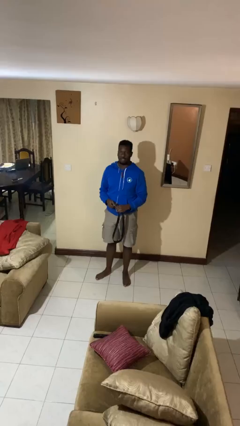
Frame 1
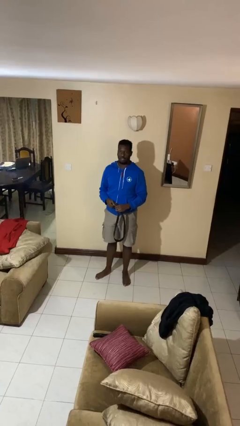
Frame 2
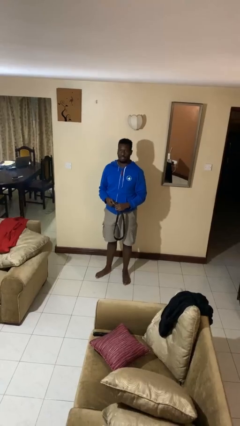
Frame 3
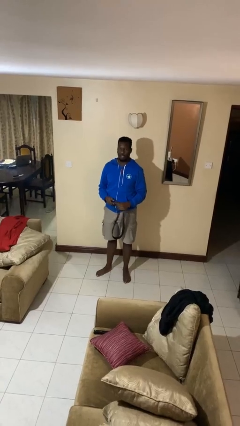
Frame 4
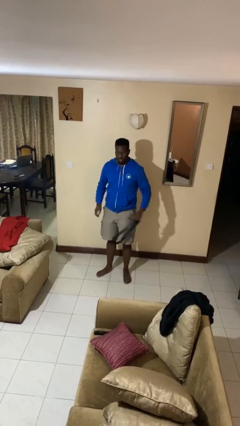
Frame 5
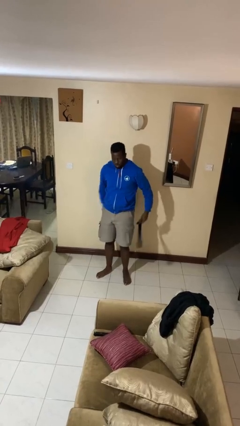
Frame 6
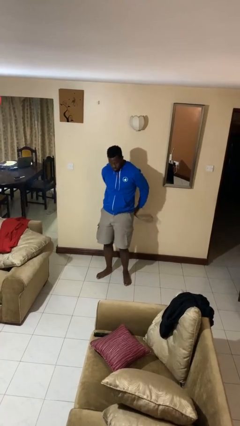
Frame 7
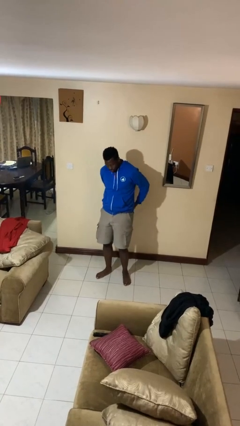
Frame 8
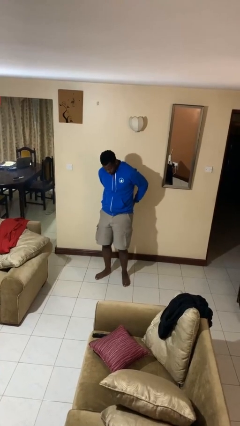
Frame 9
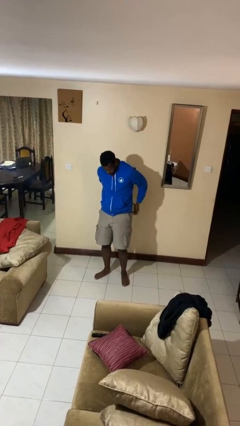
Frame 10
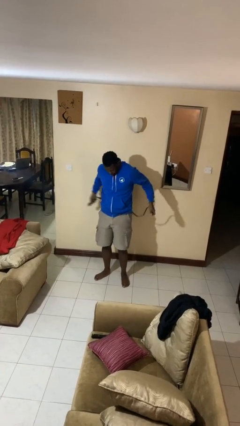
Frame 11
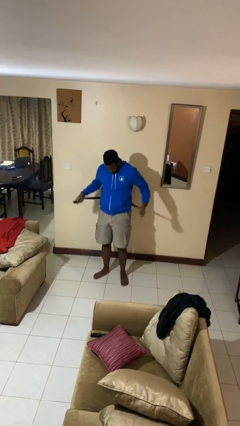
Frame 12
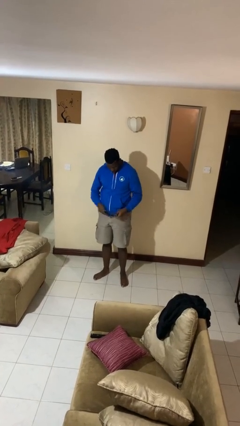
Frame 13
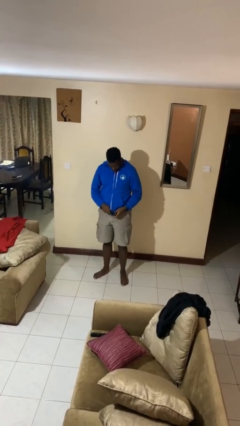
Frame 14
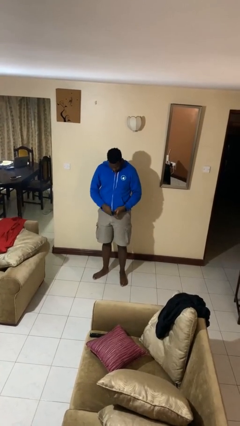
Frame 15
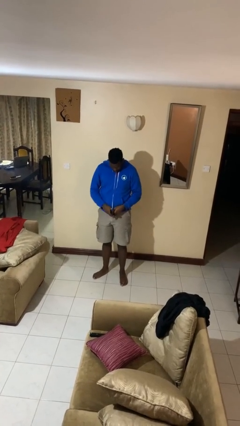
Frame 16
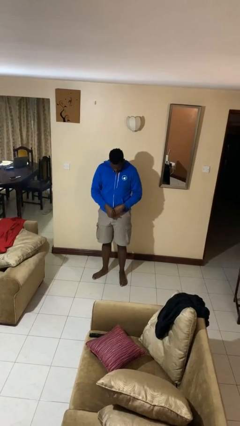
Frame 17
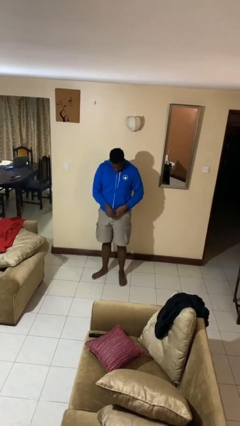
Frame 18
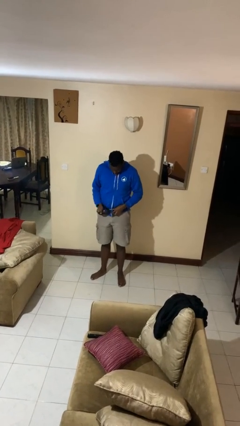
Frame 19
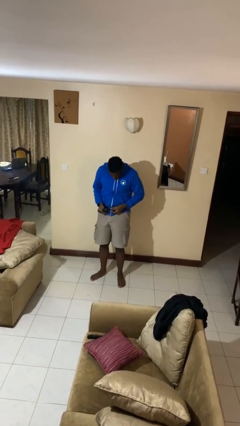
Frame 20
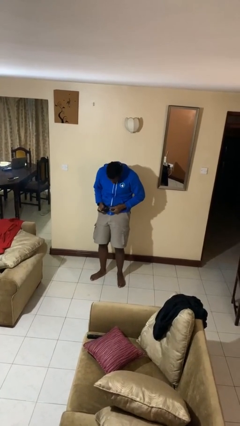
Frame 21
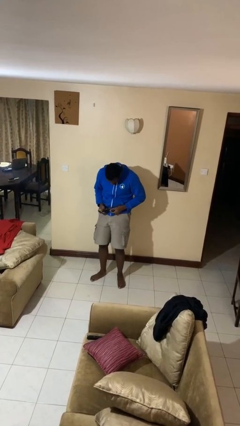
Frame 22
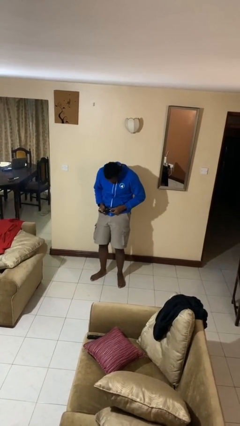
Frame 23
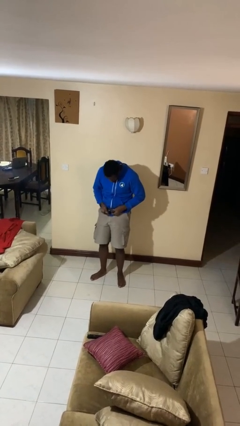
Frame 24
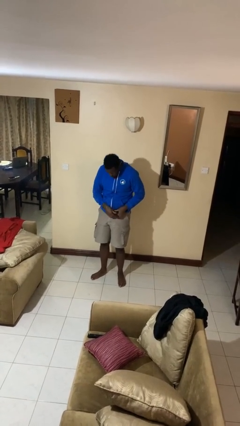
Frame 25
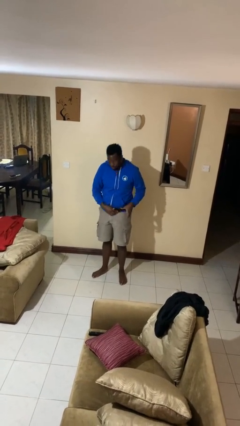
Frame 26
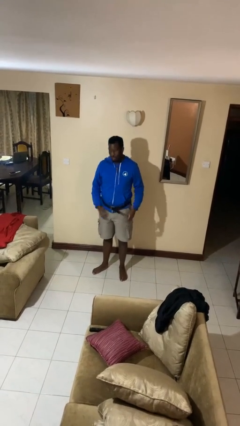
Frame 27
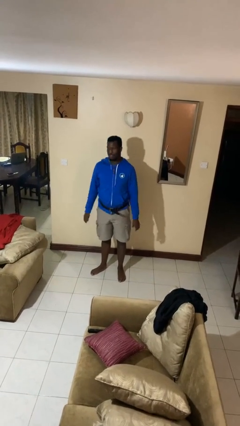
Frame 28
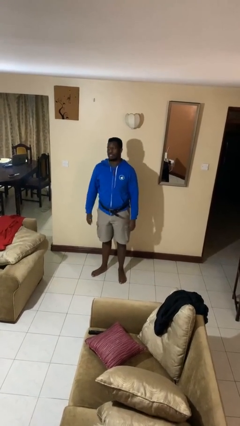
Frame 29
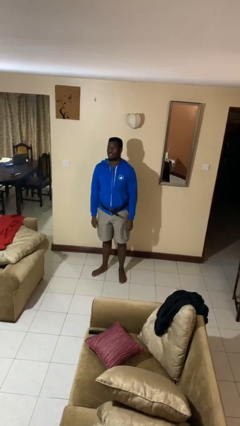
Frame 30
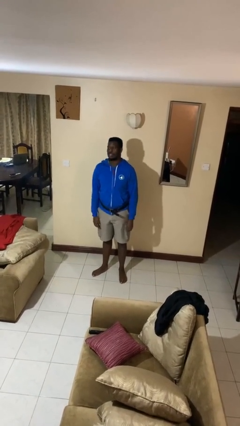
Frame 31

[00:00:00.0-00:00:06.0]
person puts on belt

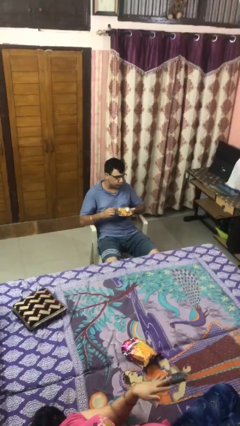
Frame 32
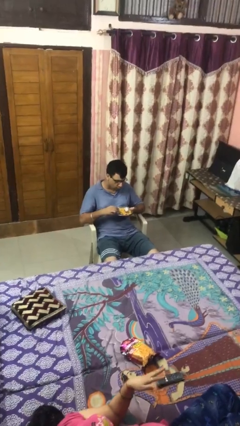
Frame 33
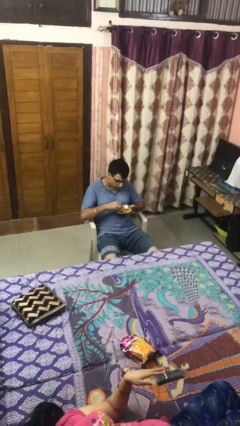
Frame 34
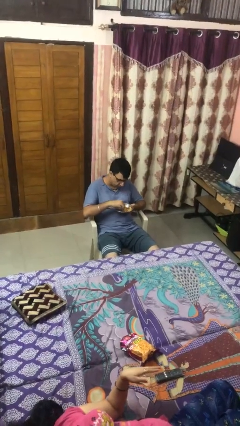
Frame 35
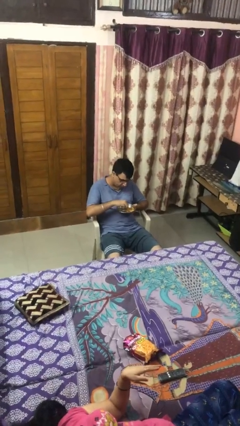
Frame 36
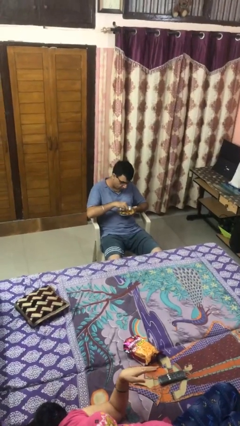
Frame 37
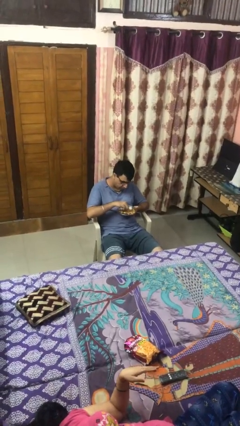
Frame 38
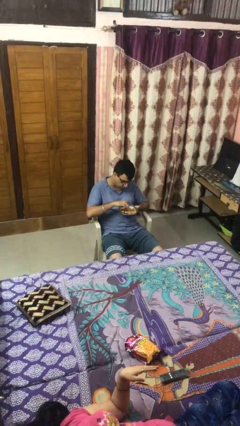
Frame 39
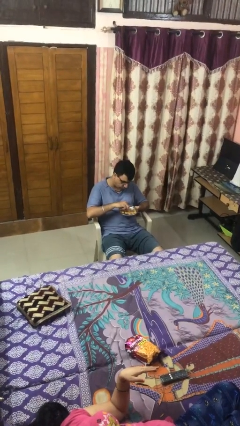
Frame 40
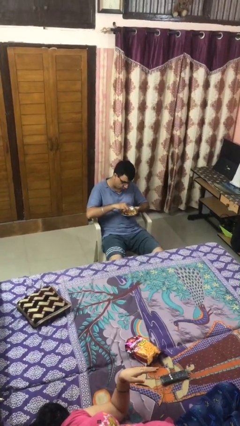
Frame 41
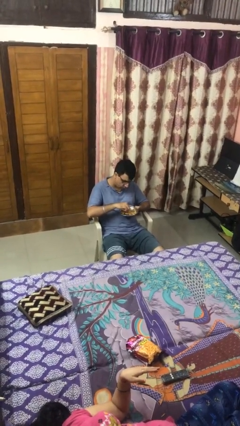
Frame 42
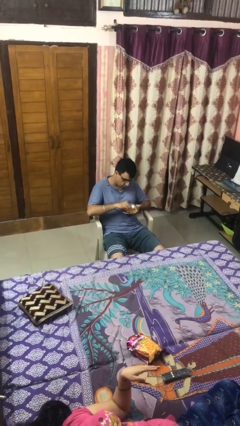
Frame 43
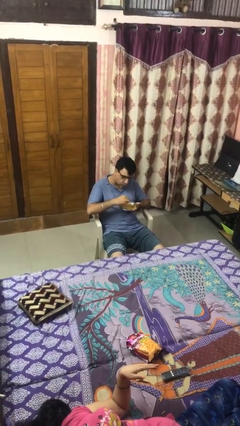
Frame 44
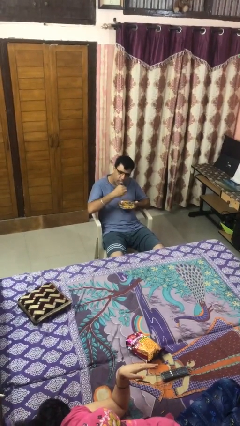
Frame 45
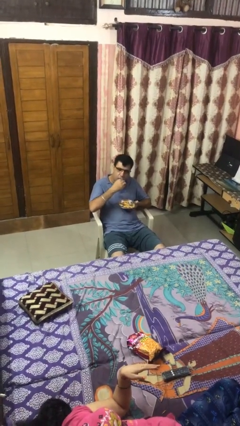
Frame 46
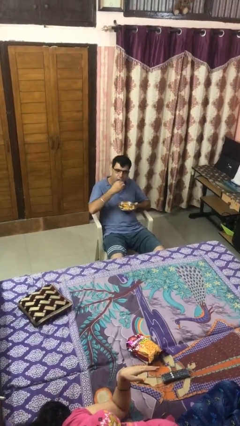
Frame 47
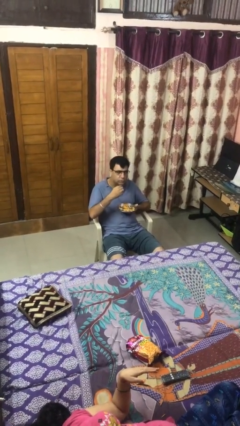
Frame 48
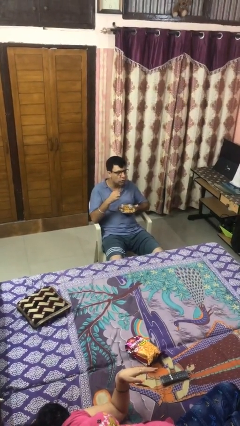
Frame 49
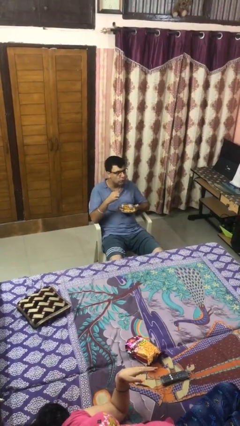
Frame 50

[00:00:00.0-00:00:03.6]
person eats with hands

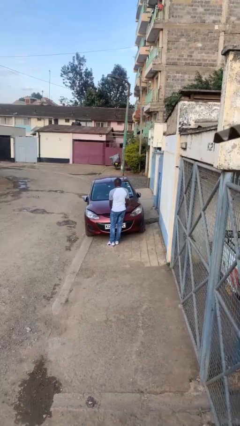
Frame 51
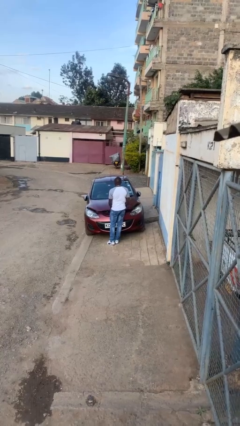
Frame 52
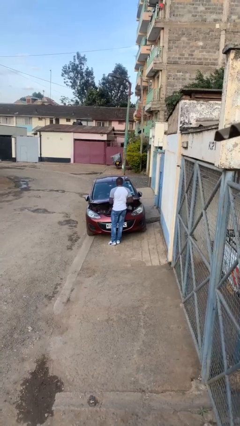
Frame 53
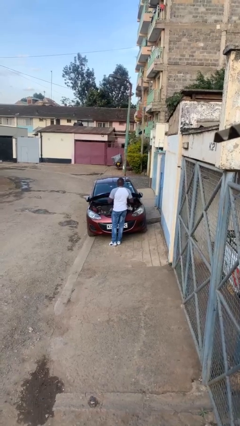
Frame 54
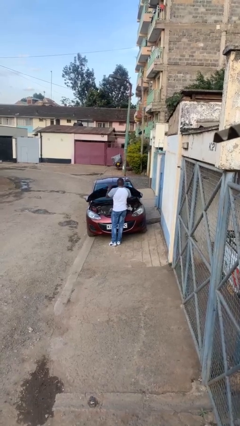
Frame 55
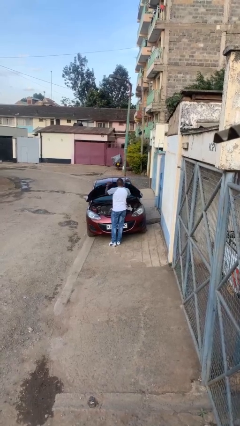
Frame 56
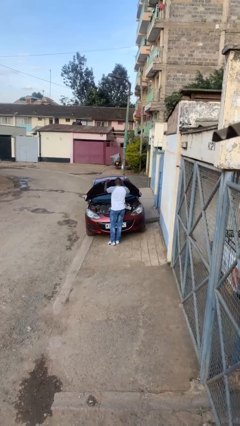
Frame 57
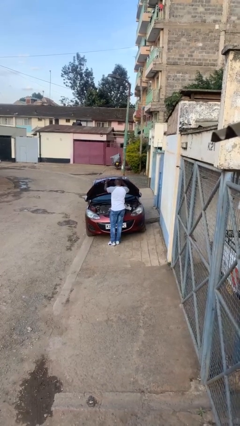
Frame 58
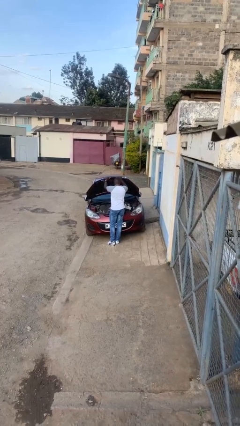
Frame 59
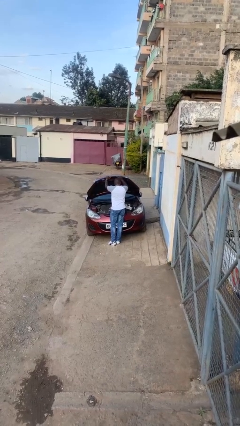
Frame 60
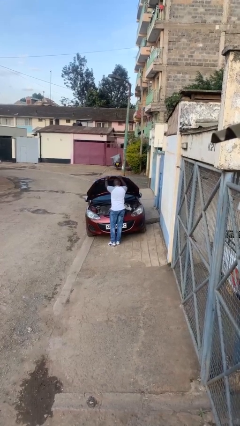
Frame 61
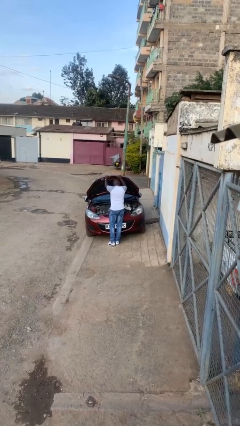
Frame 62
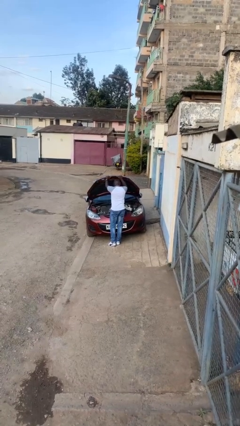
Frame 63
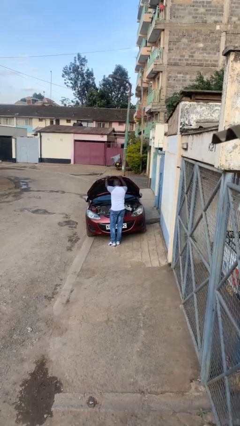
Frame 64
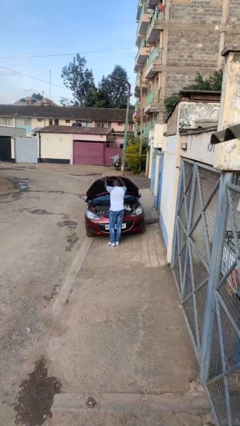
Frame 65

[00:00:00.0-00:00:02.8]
person opens car hood

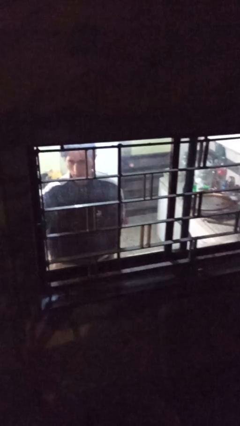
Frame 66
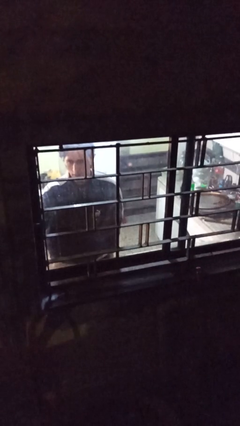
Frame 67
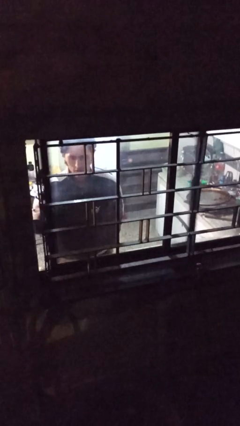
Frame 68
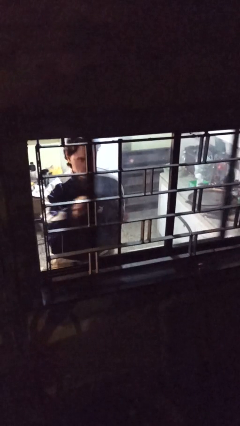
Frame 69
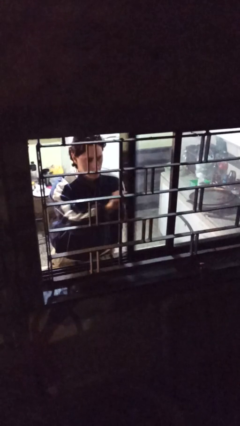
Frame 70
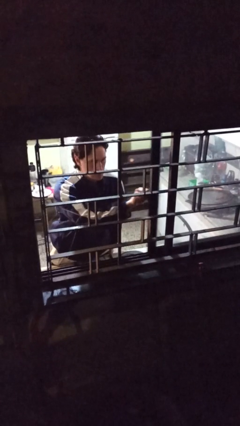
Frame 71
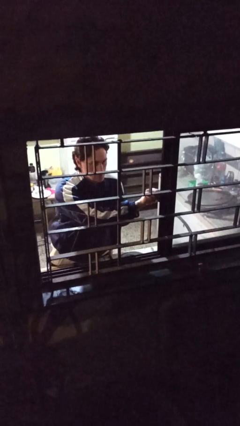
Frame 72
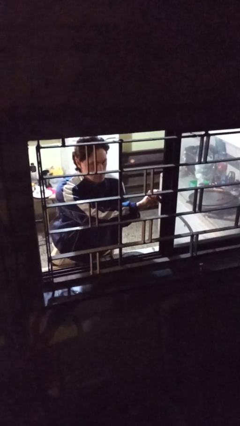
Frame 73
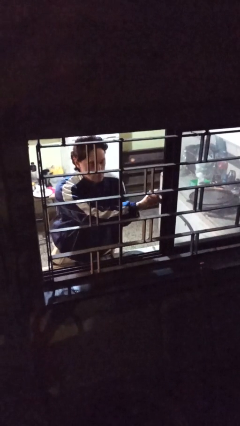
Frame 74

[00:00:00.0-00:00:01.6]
person opens home window

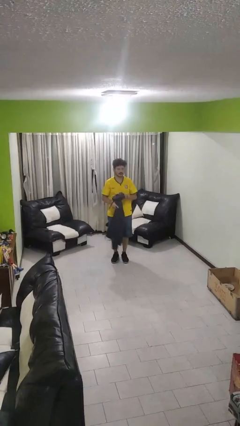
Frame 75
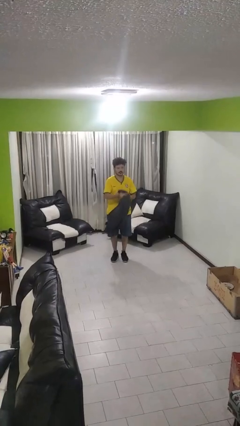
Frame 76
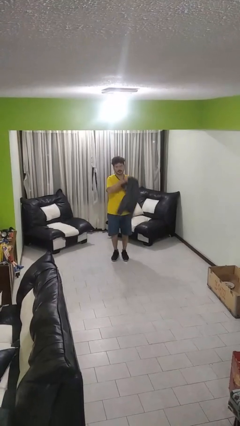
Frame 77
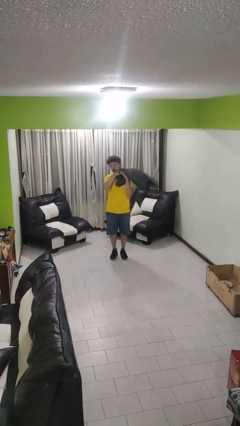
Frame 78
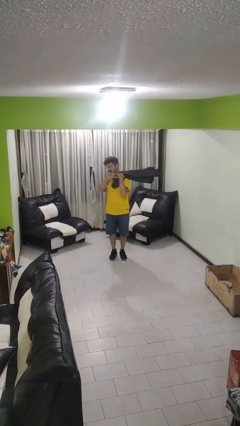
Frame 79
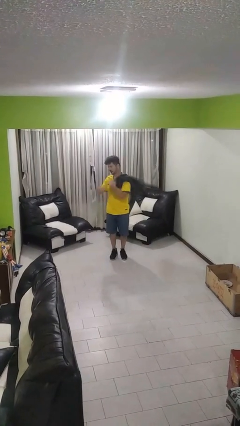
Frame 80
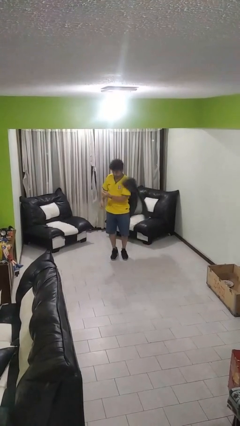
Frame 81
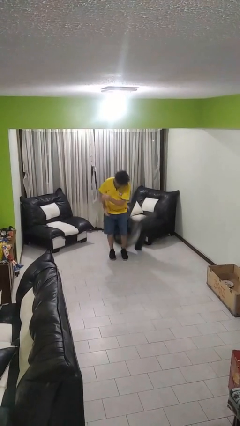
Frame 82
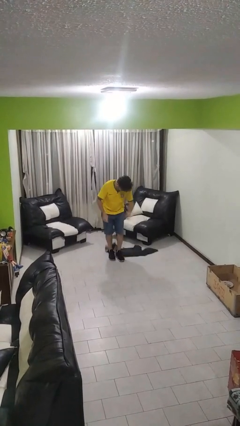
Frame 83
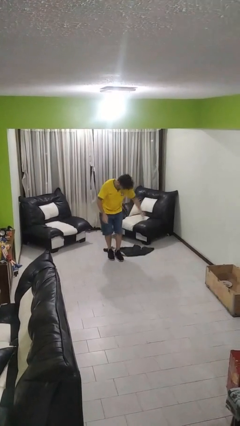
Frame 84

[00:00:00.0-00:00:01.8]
person drops object

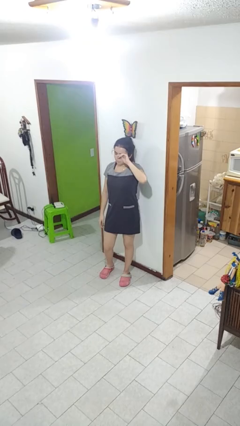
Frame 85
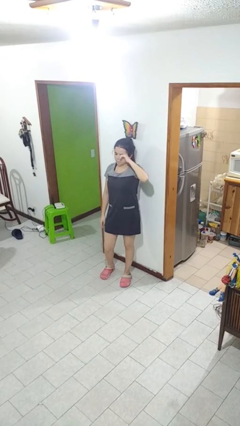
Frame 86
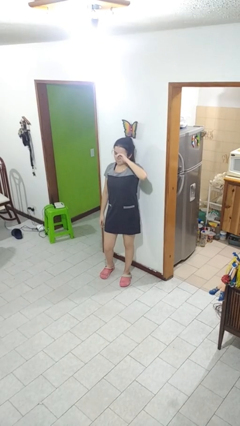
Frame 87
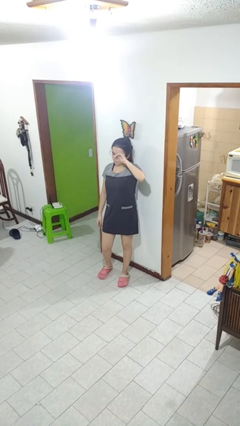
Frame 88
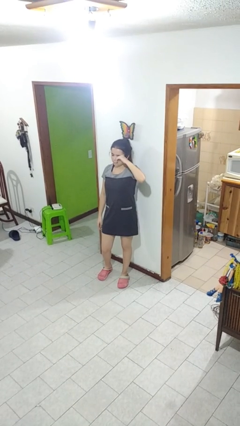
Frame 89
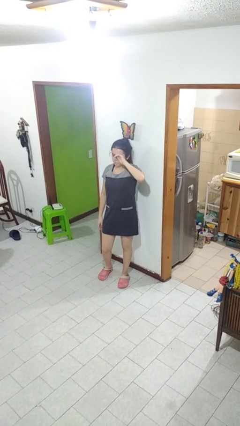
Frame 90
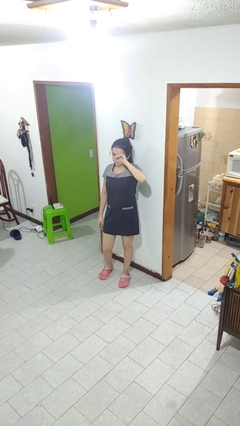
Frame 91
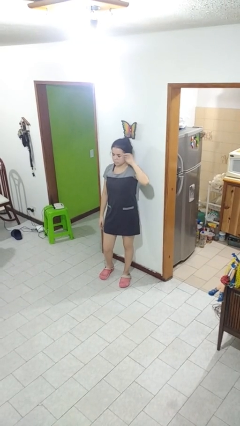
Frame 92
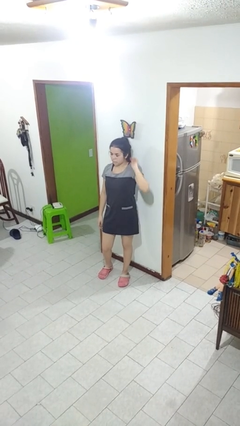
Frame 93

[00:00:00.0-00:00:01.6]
person rubs eyes
